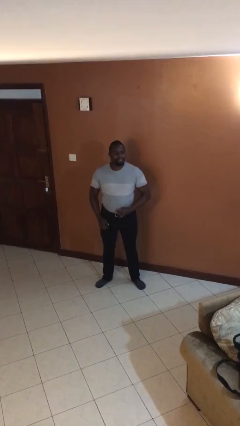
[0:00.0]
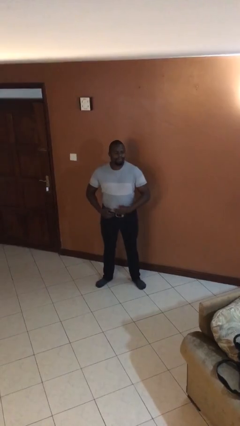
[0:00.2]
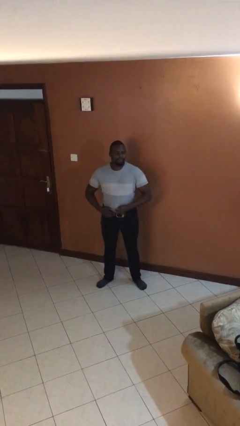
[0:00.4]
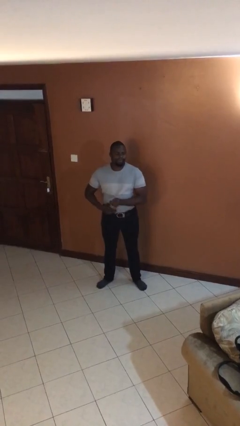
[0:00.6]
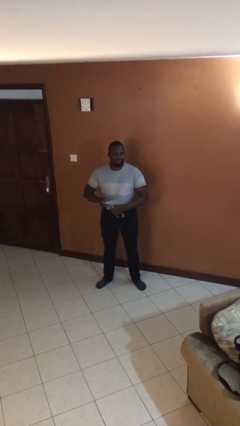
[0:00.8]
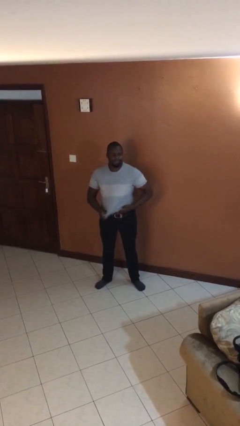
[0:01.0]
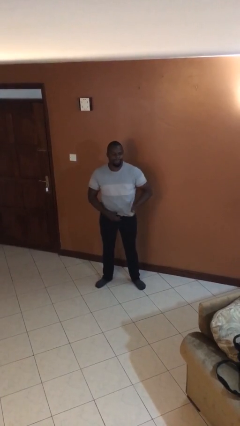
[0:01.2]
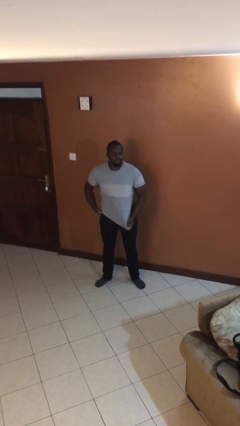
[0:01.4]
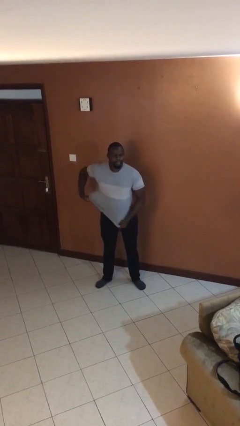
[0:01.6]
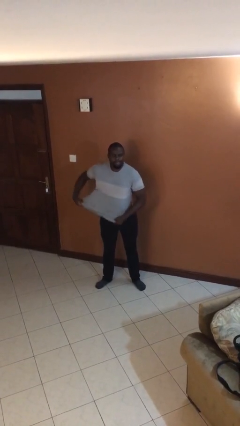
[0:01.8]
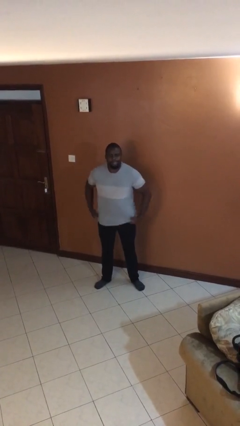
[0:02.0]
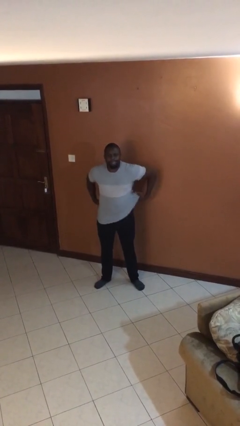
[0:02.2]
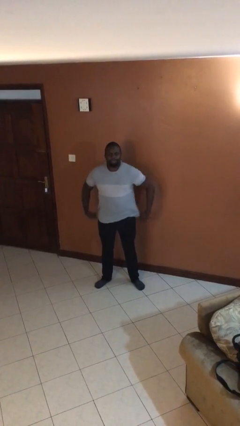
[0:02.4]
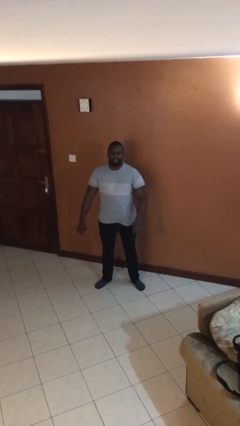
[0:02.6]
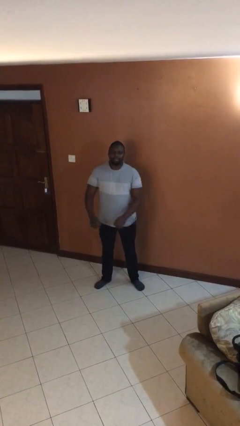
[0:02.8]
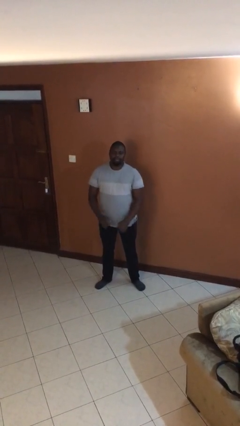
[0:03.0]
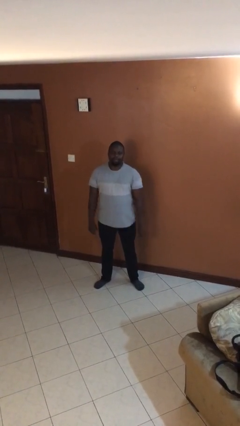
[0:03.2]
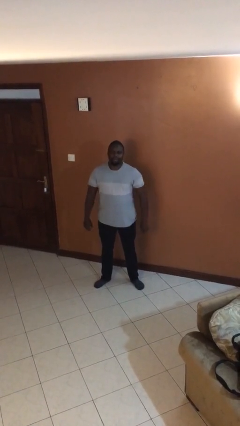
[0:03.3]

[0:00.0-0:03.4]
person untucks shirt

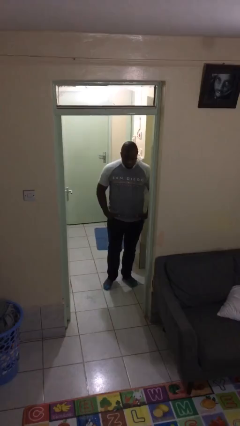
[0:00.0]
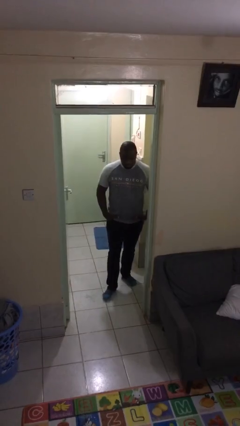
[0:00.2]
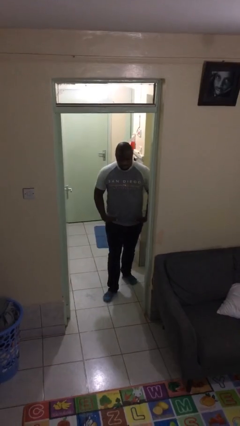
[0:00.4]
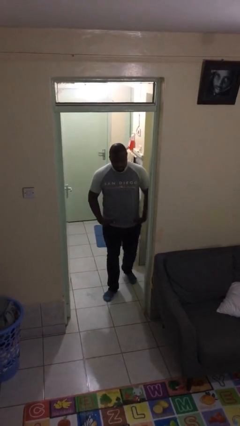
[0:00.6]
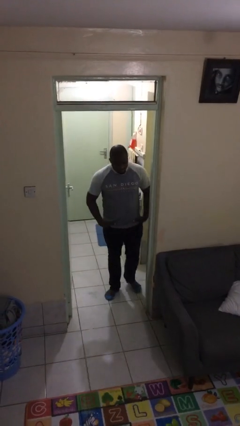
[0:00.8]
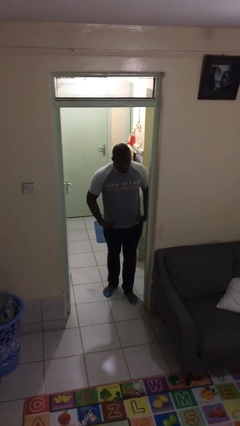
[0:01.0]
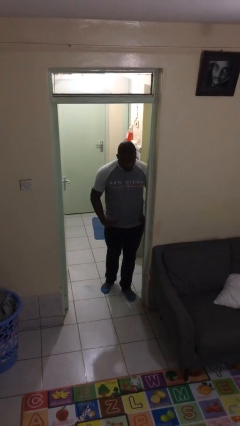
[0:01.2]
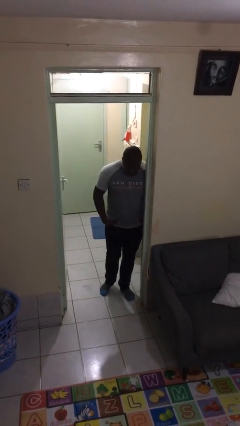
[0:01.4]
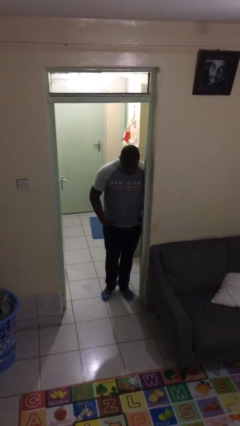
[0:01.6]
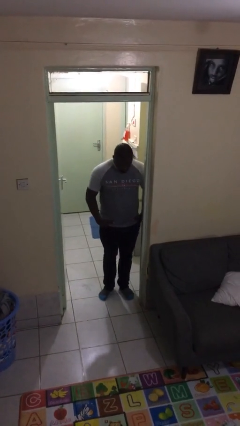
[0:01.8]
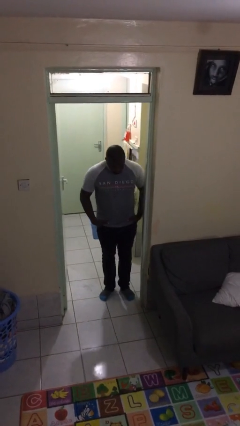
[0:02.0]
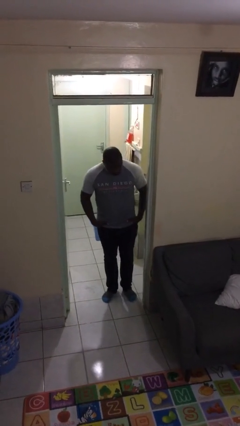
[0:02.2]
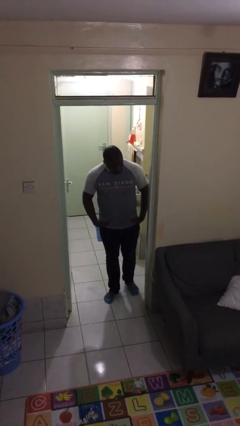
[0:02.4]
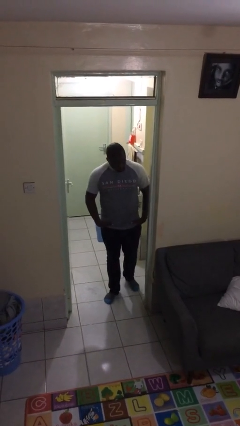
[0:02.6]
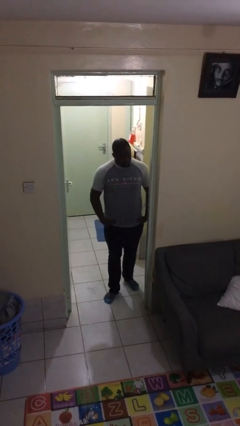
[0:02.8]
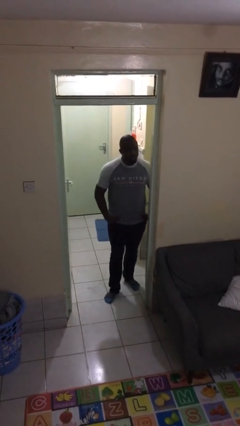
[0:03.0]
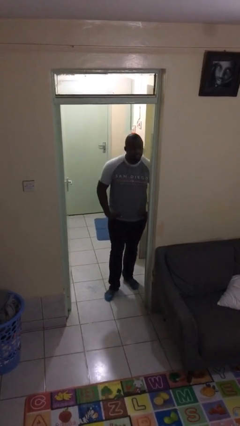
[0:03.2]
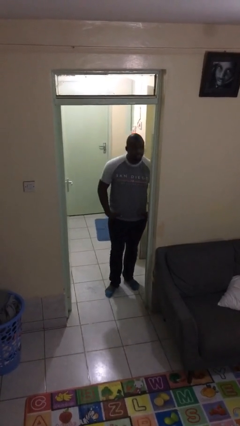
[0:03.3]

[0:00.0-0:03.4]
person bumps into wall

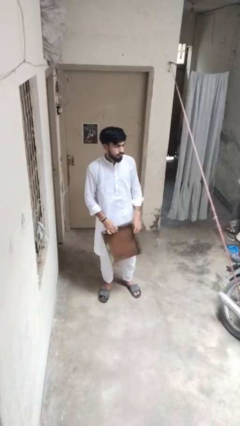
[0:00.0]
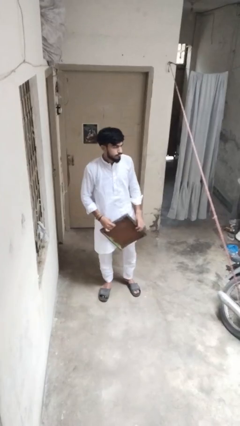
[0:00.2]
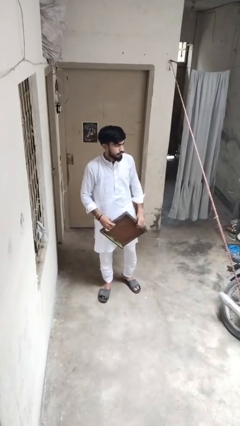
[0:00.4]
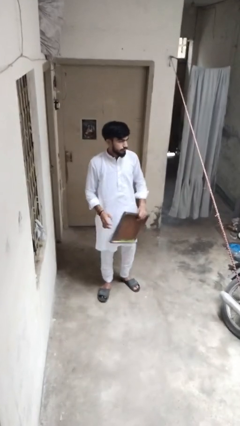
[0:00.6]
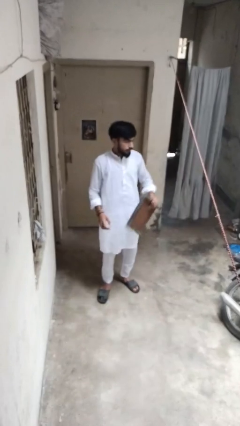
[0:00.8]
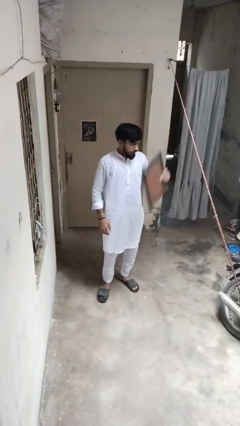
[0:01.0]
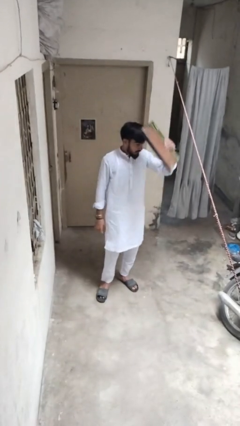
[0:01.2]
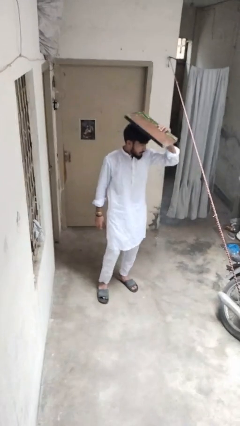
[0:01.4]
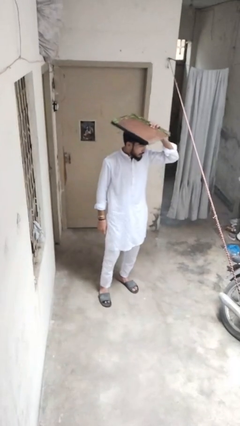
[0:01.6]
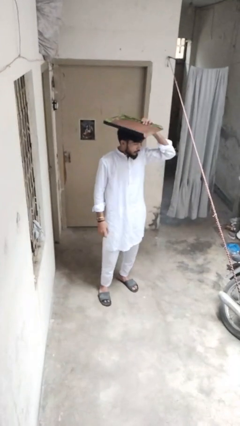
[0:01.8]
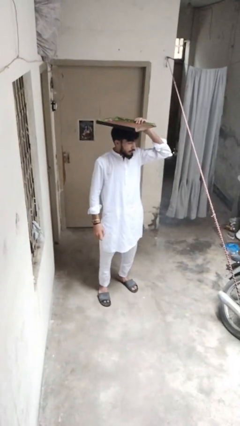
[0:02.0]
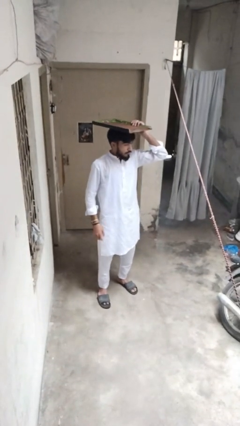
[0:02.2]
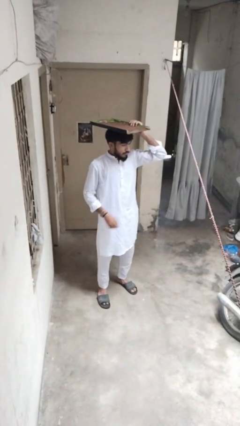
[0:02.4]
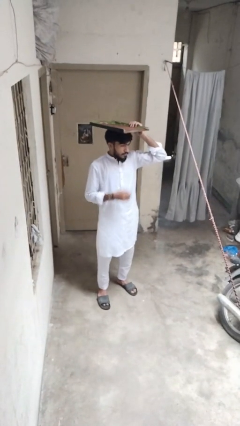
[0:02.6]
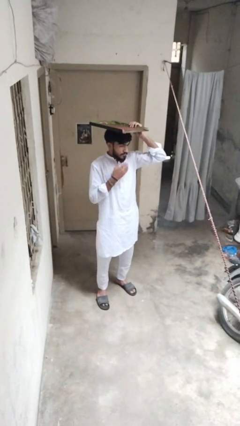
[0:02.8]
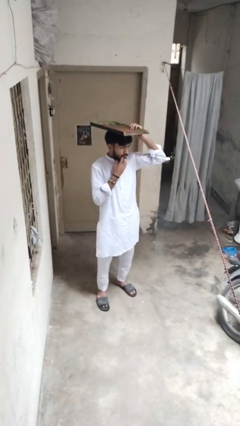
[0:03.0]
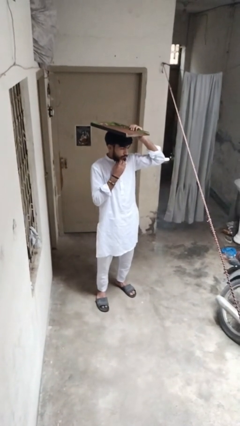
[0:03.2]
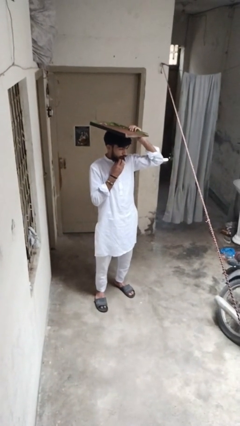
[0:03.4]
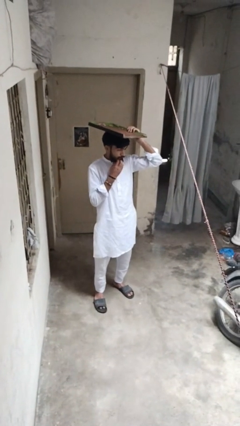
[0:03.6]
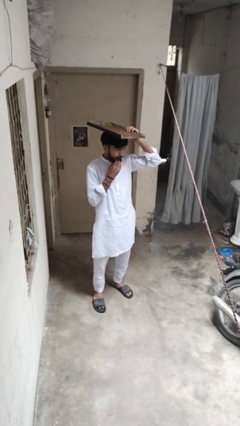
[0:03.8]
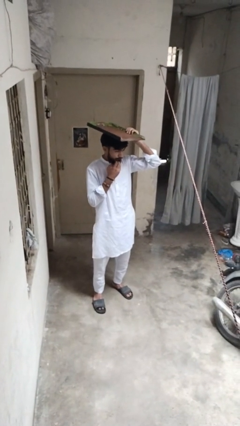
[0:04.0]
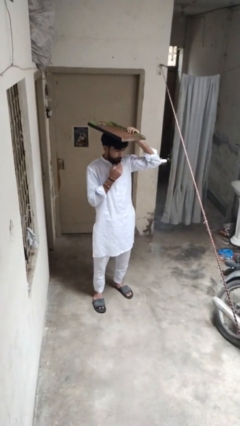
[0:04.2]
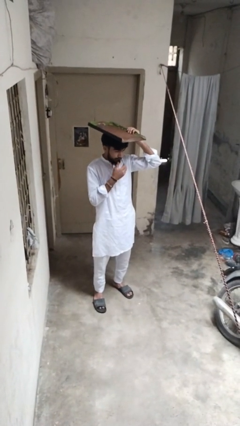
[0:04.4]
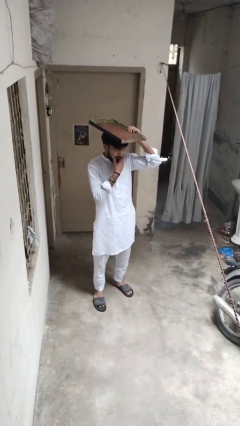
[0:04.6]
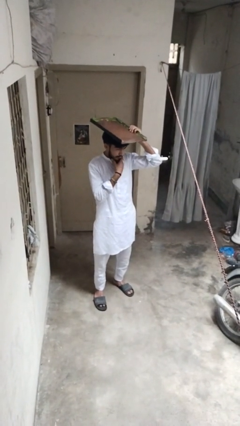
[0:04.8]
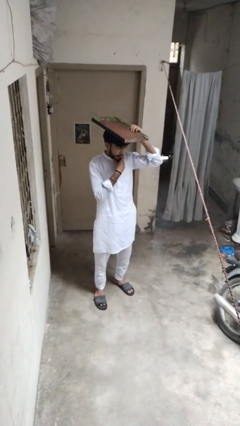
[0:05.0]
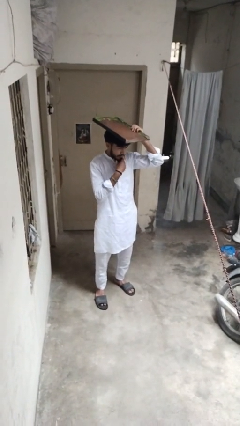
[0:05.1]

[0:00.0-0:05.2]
person holds object above head

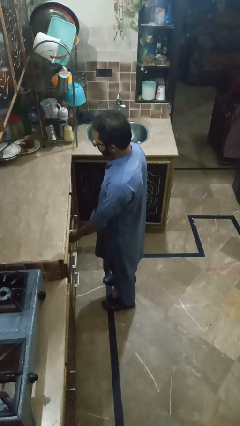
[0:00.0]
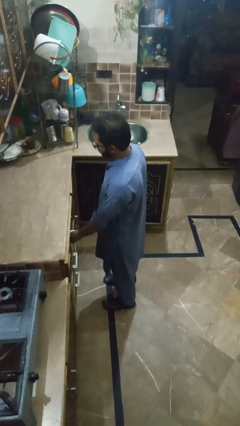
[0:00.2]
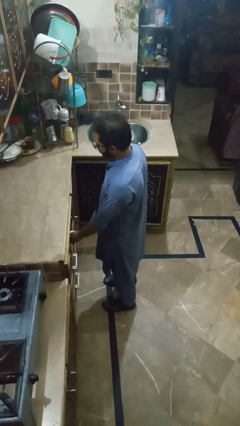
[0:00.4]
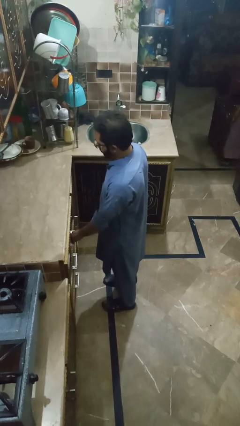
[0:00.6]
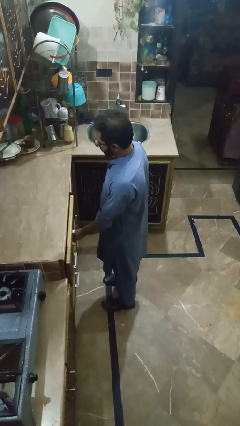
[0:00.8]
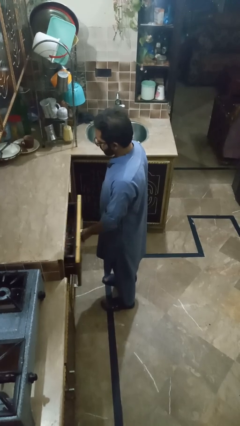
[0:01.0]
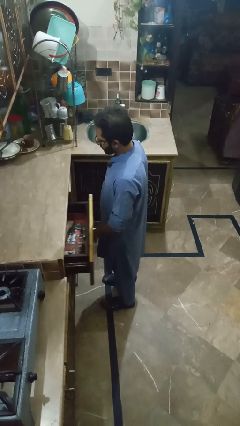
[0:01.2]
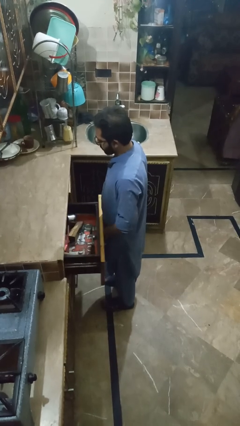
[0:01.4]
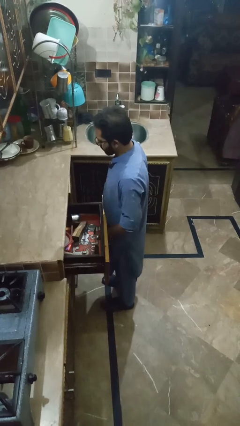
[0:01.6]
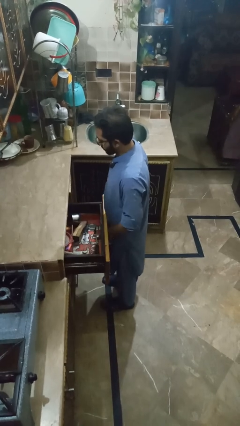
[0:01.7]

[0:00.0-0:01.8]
person opens kitchen drawer

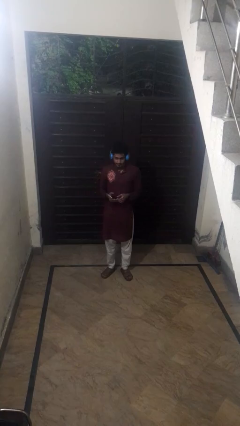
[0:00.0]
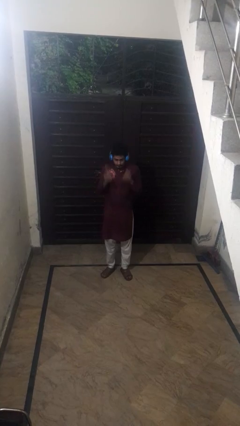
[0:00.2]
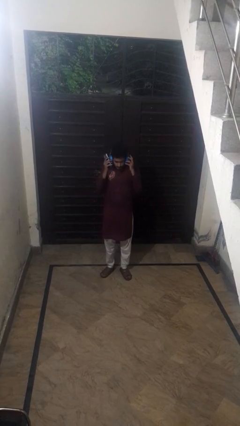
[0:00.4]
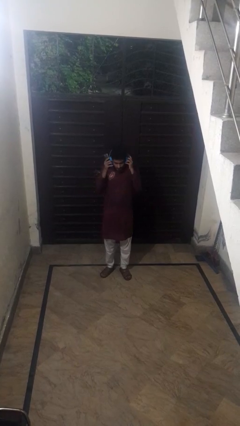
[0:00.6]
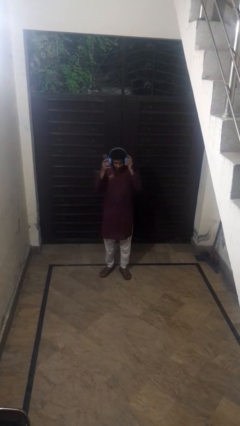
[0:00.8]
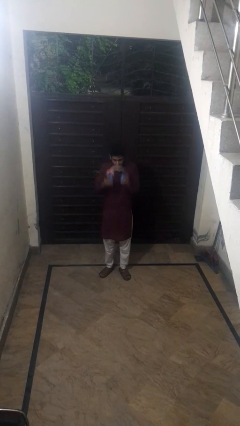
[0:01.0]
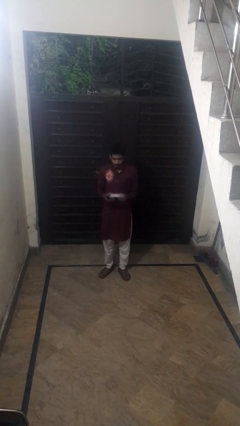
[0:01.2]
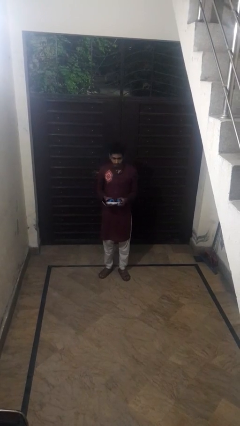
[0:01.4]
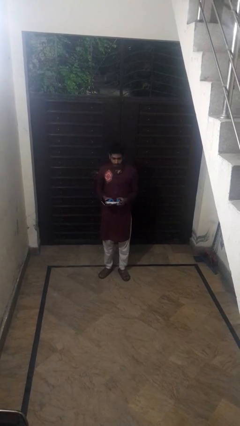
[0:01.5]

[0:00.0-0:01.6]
person takes off headphones

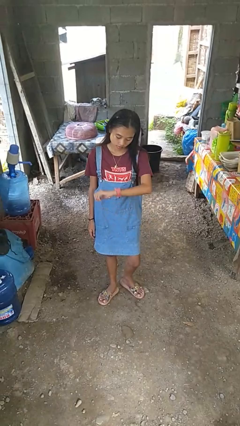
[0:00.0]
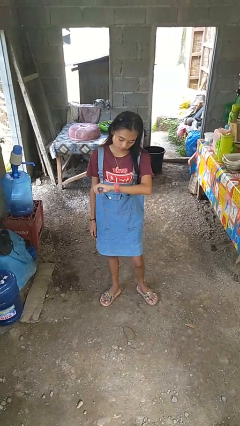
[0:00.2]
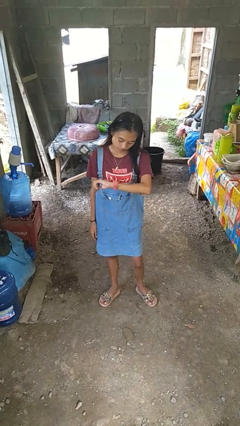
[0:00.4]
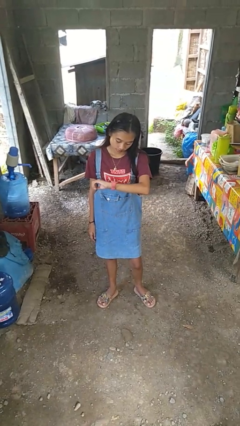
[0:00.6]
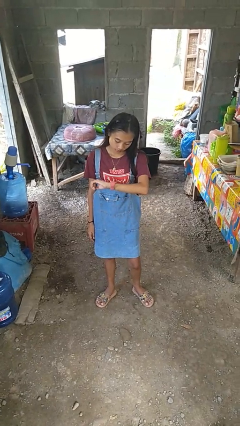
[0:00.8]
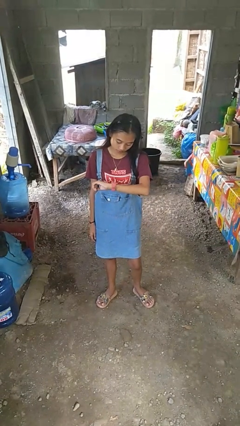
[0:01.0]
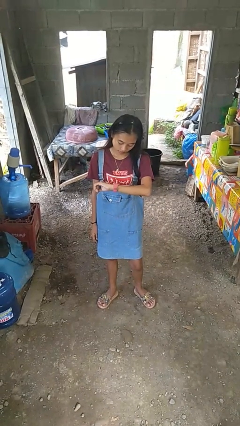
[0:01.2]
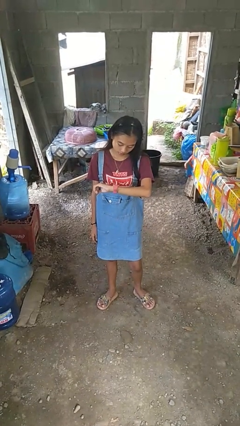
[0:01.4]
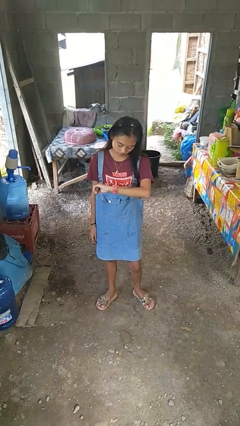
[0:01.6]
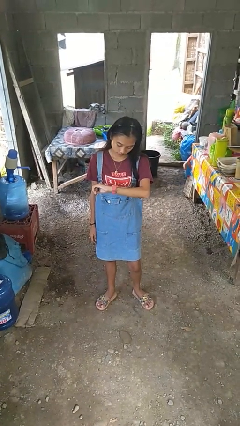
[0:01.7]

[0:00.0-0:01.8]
person looks at wristwatch

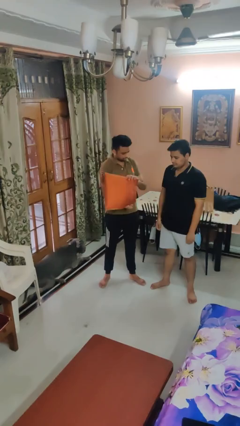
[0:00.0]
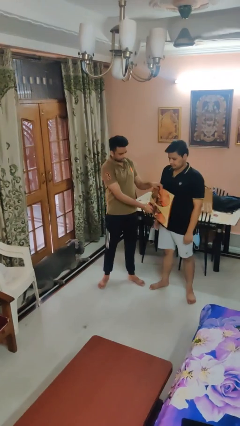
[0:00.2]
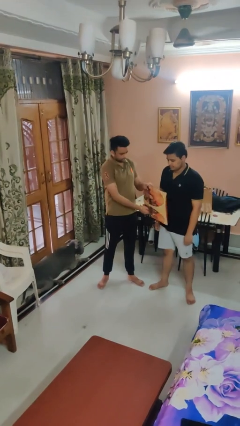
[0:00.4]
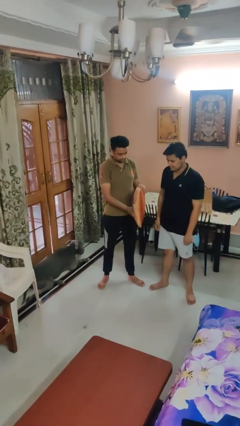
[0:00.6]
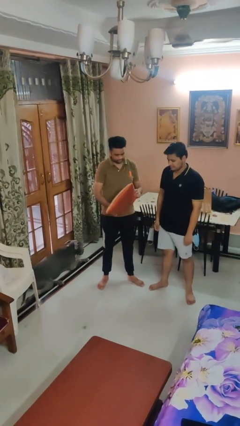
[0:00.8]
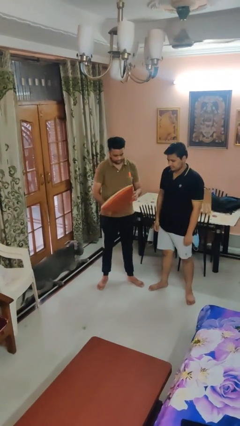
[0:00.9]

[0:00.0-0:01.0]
person hits person with pillow
